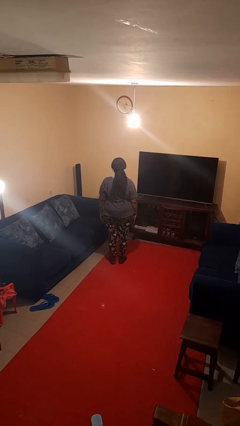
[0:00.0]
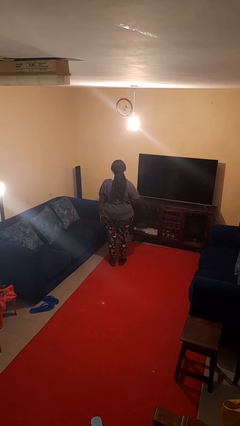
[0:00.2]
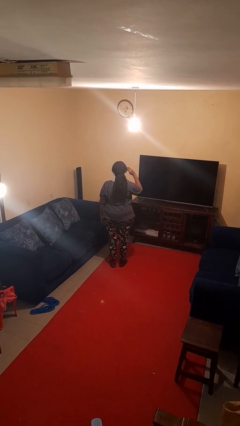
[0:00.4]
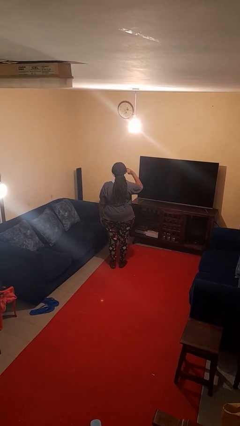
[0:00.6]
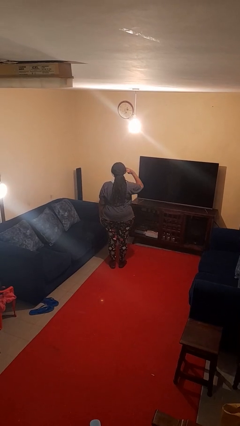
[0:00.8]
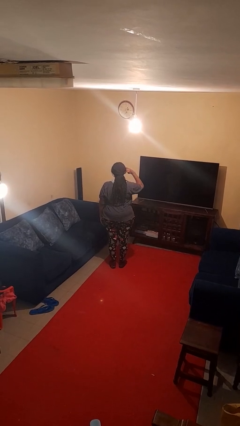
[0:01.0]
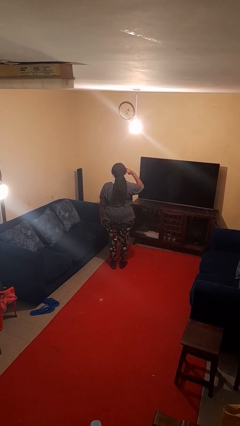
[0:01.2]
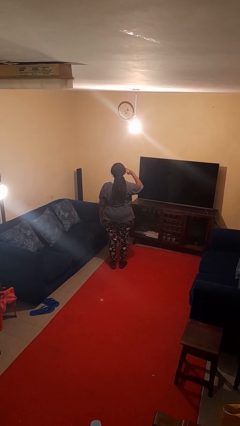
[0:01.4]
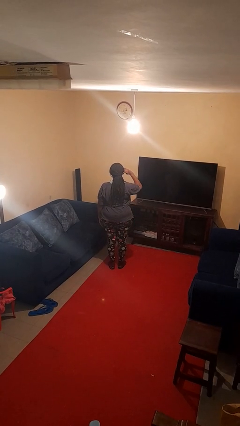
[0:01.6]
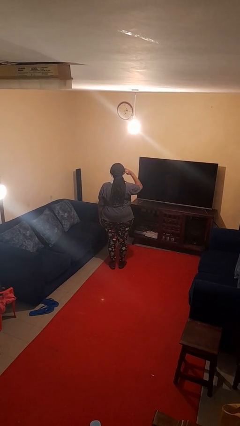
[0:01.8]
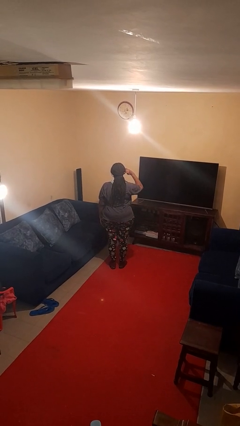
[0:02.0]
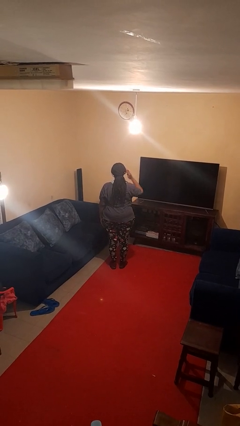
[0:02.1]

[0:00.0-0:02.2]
person salutes

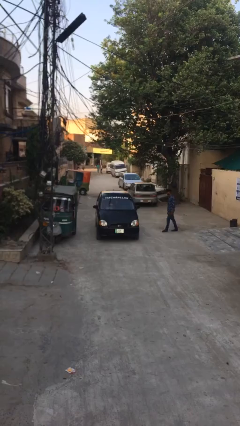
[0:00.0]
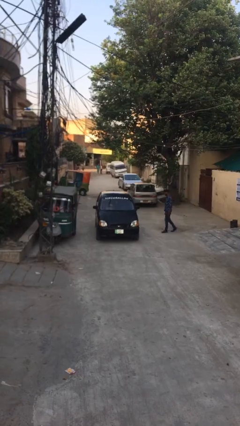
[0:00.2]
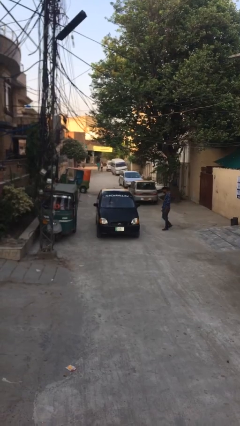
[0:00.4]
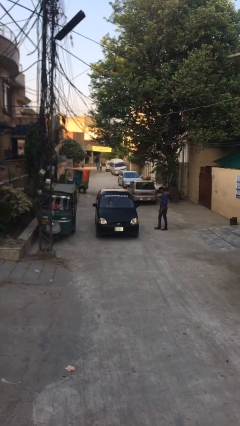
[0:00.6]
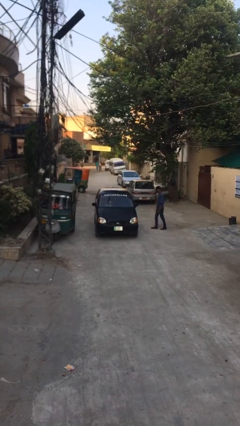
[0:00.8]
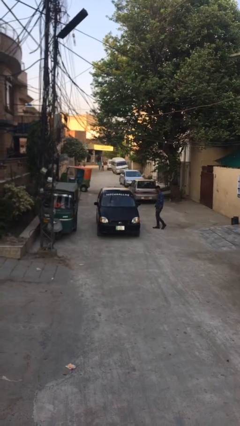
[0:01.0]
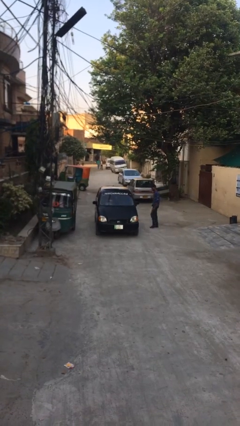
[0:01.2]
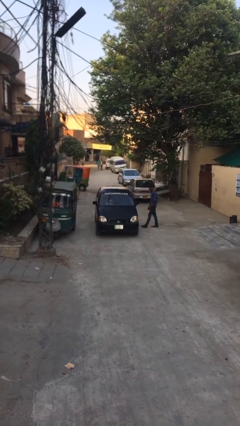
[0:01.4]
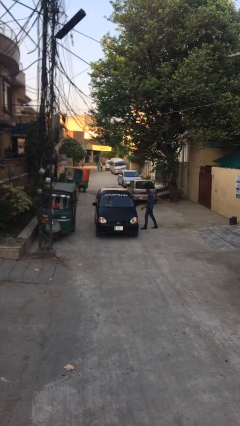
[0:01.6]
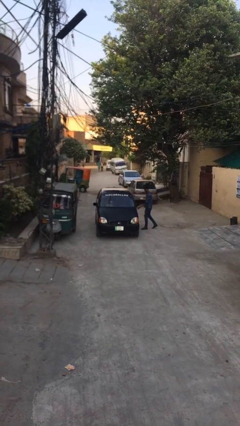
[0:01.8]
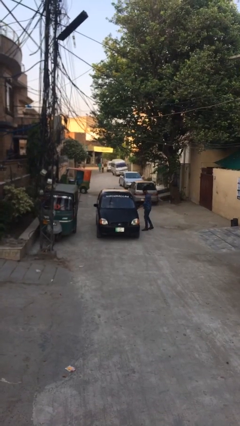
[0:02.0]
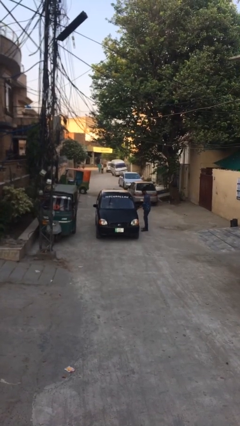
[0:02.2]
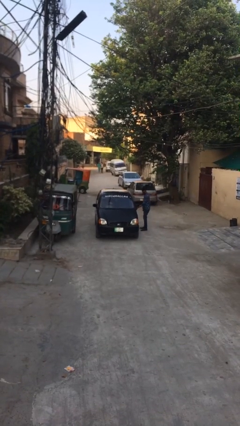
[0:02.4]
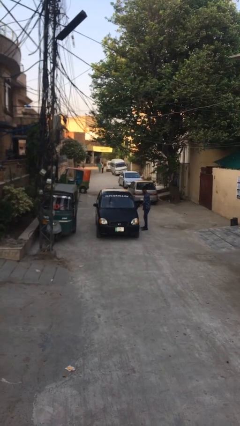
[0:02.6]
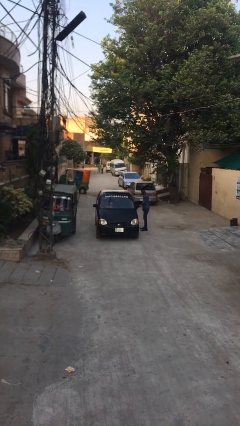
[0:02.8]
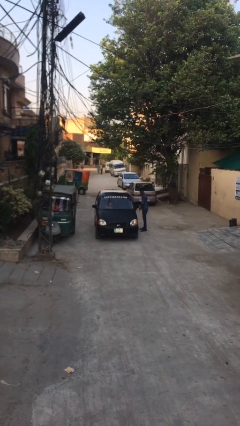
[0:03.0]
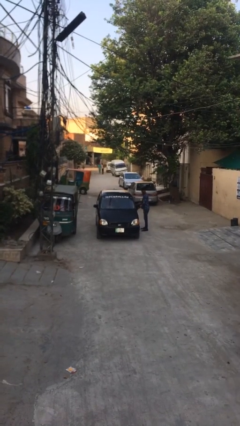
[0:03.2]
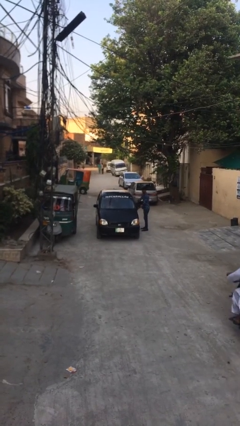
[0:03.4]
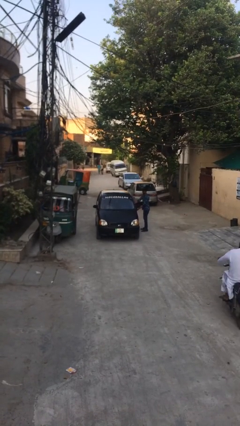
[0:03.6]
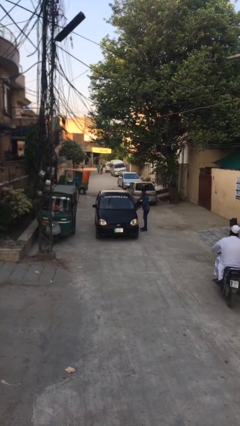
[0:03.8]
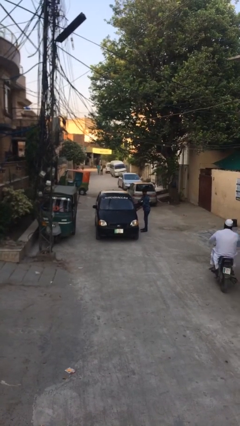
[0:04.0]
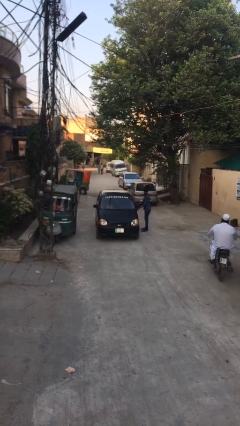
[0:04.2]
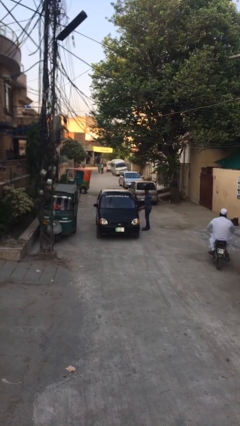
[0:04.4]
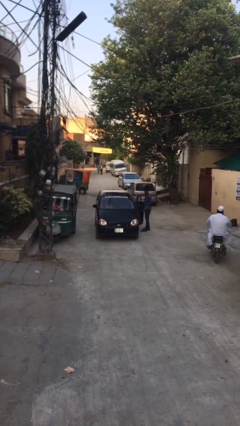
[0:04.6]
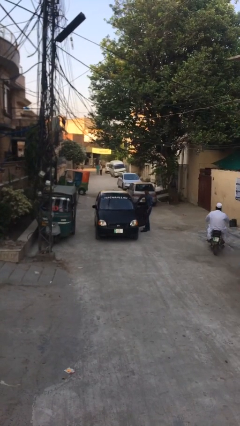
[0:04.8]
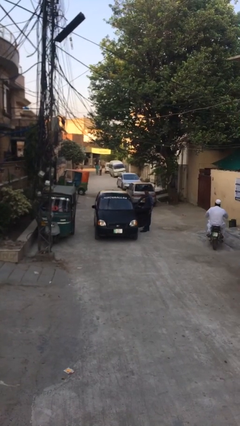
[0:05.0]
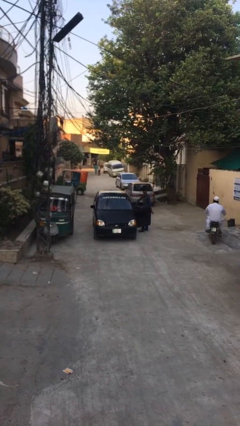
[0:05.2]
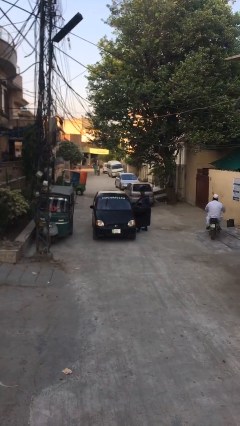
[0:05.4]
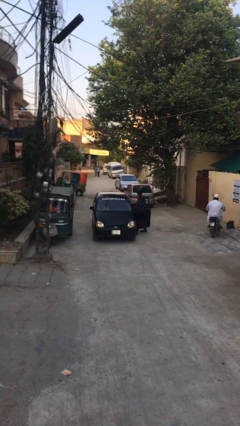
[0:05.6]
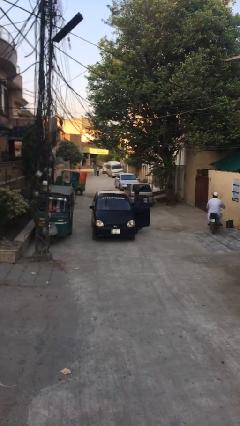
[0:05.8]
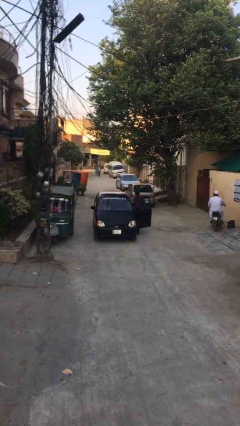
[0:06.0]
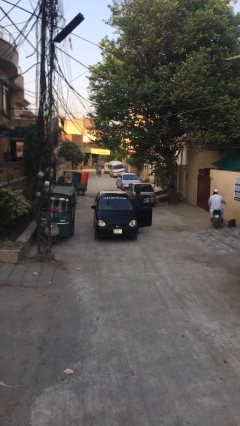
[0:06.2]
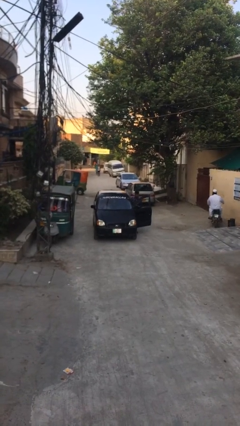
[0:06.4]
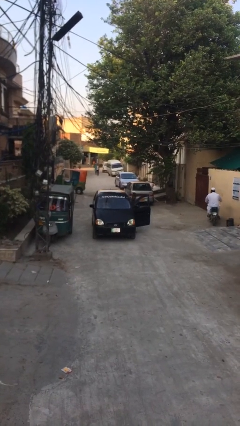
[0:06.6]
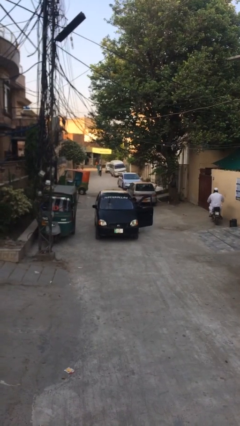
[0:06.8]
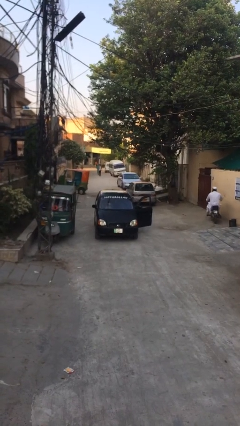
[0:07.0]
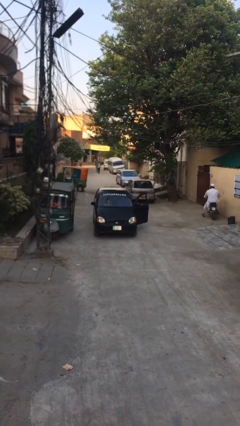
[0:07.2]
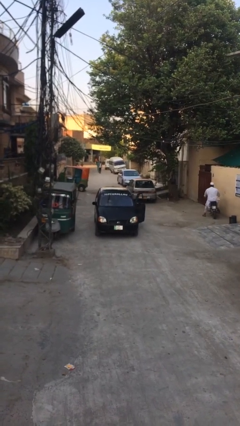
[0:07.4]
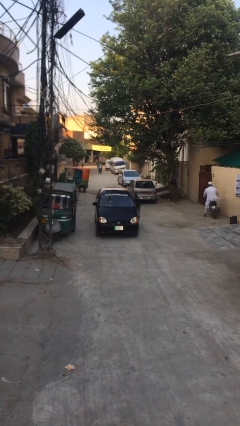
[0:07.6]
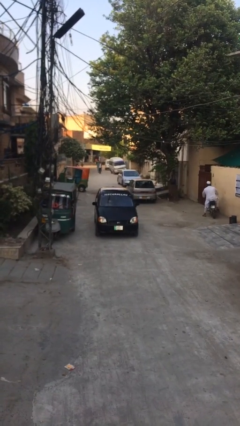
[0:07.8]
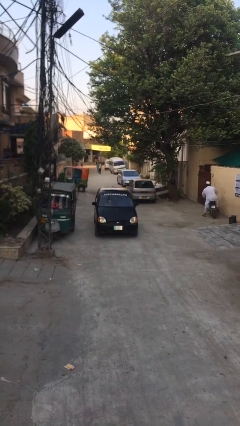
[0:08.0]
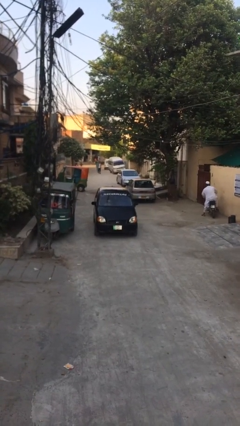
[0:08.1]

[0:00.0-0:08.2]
car picks up person

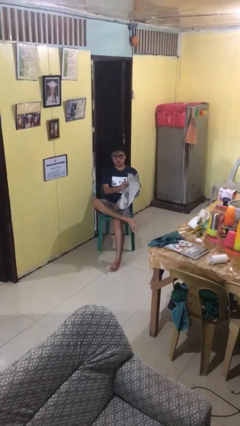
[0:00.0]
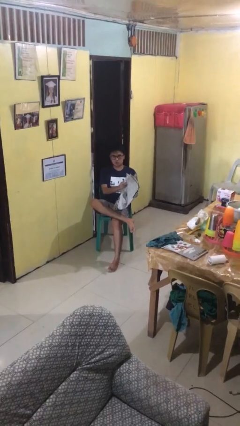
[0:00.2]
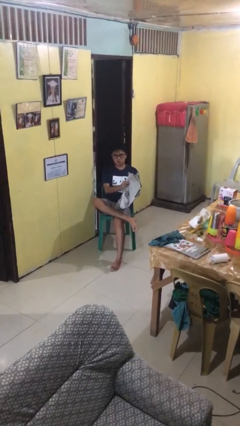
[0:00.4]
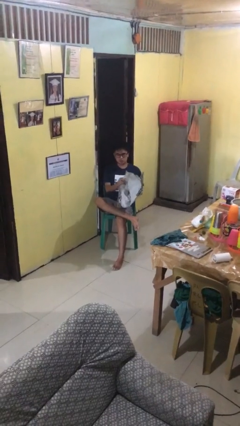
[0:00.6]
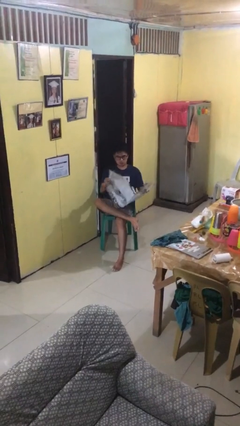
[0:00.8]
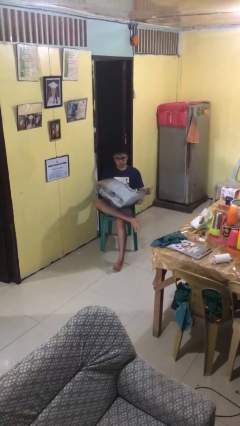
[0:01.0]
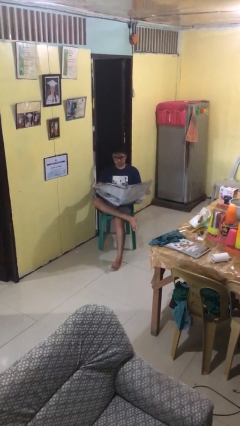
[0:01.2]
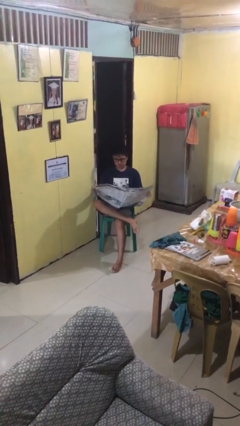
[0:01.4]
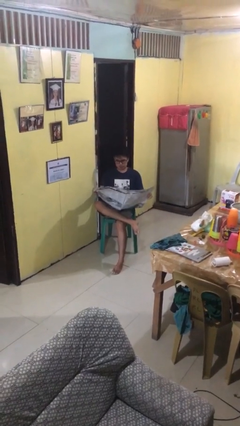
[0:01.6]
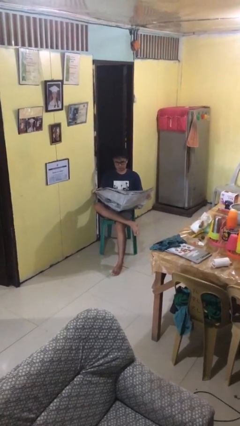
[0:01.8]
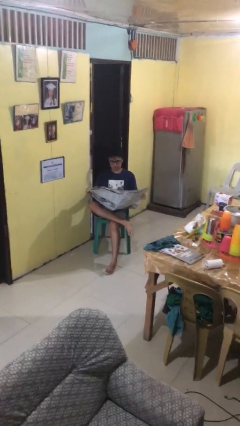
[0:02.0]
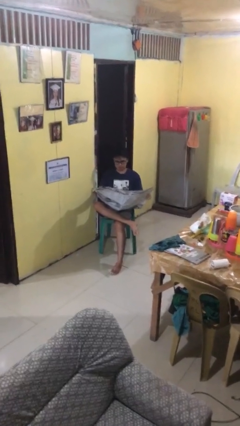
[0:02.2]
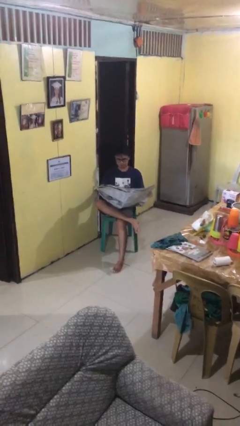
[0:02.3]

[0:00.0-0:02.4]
person reads newspaper

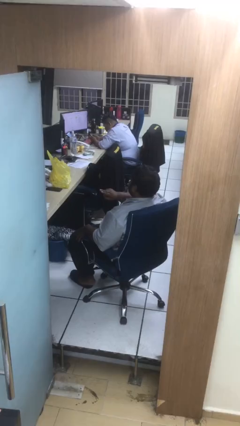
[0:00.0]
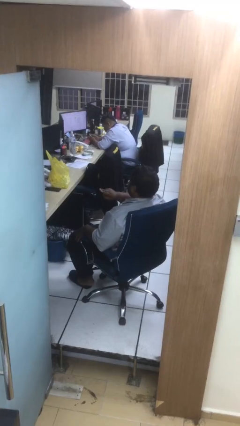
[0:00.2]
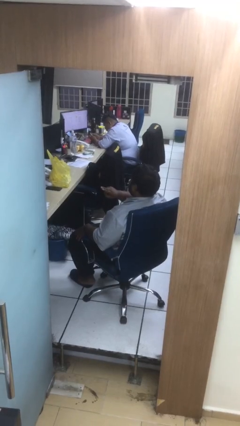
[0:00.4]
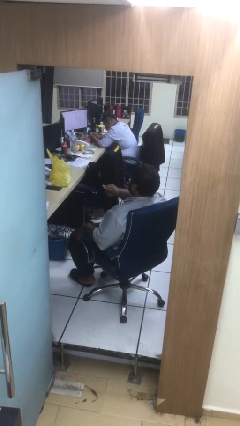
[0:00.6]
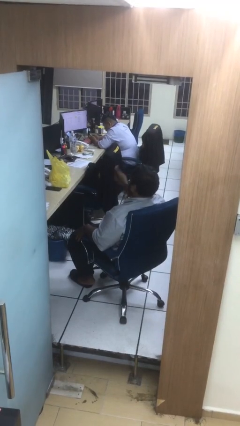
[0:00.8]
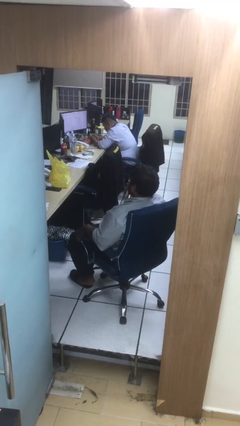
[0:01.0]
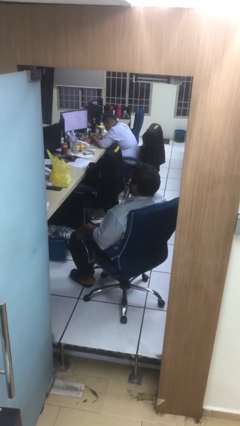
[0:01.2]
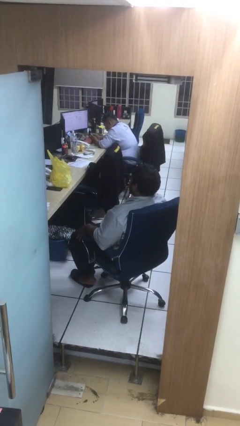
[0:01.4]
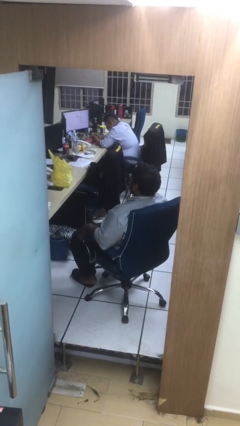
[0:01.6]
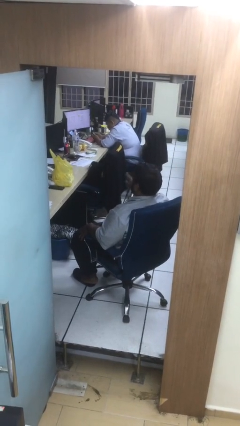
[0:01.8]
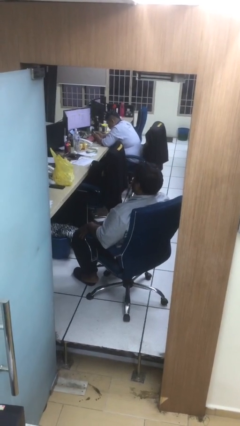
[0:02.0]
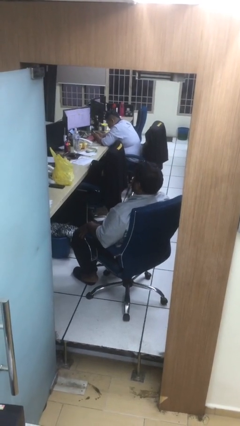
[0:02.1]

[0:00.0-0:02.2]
person gestures swipe right

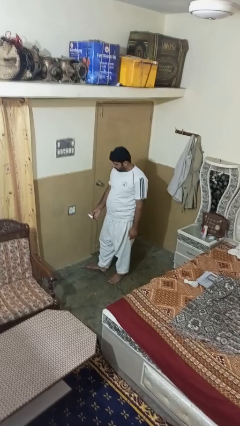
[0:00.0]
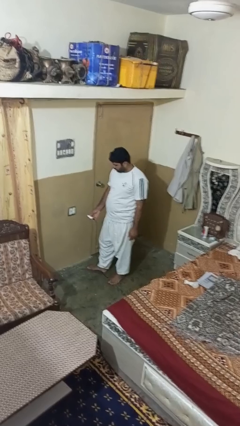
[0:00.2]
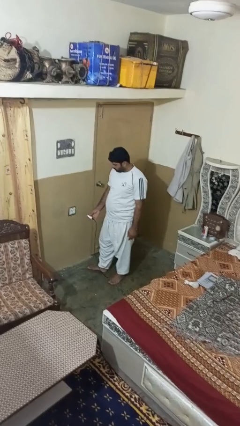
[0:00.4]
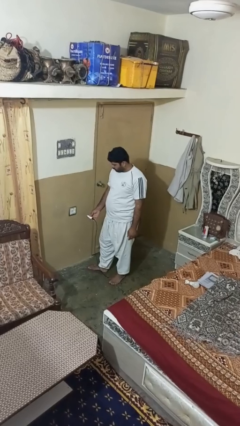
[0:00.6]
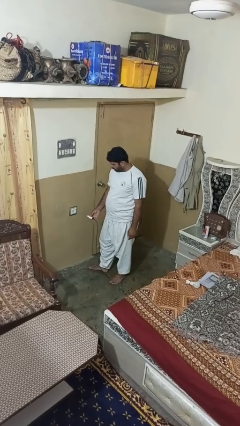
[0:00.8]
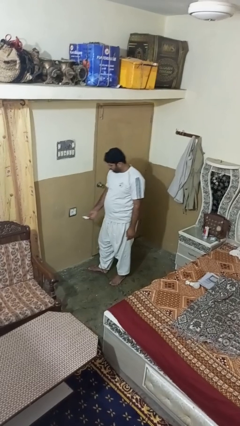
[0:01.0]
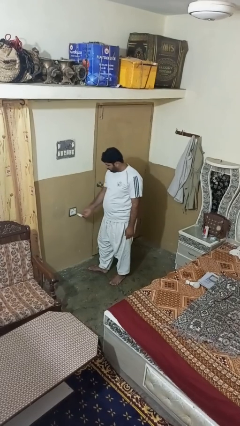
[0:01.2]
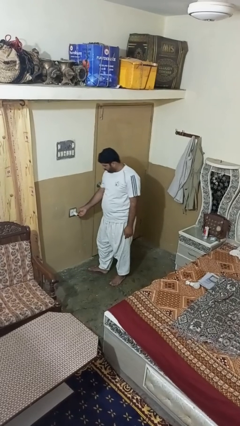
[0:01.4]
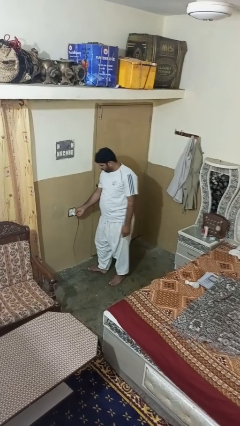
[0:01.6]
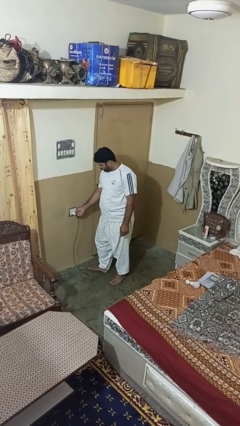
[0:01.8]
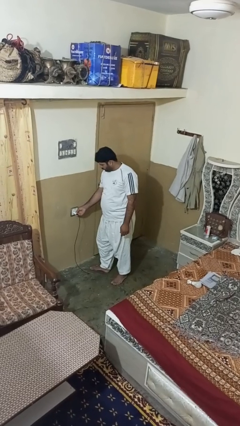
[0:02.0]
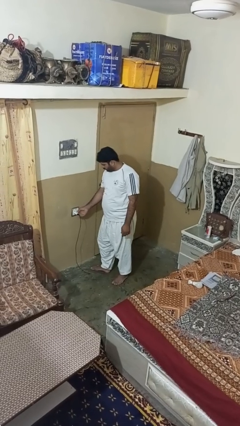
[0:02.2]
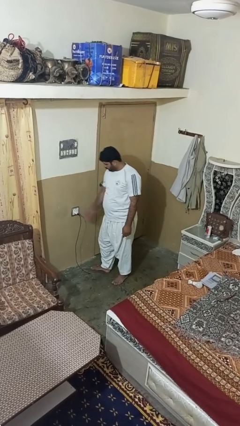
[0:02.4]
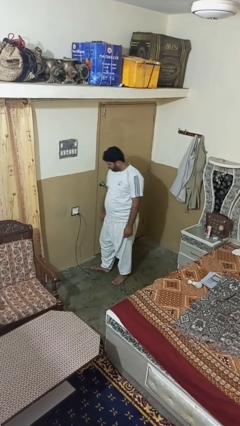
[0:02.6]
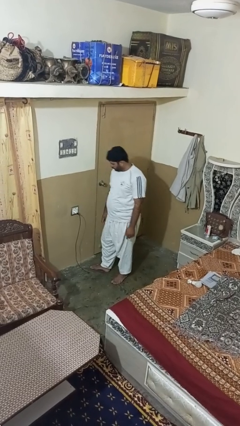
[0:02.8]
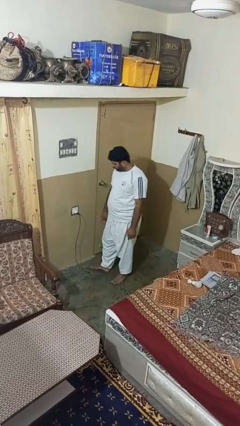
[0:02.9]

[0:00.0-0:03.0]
person plugs into electrical socket
